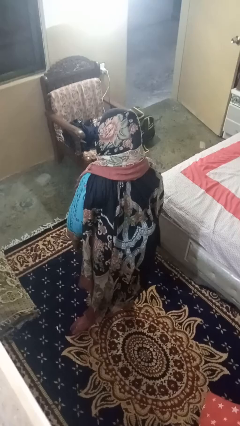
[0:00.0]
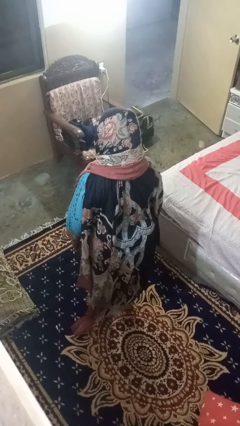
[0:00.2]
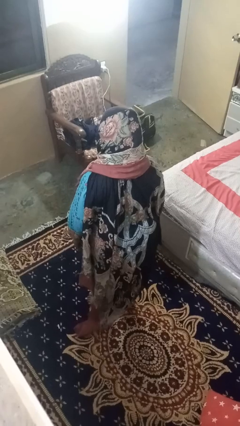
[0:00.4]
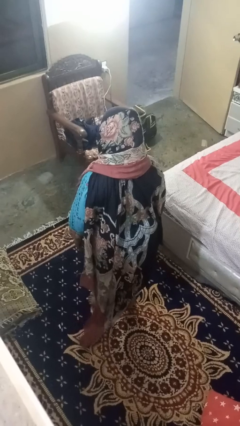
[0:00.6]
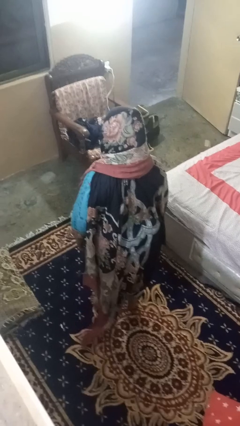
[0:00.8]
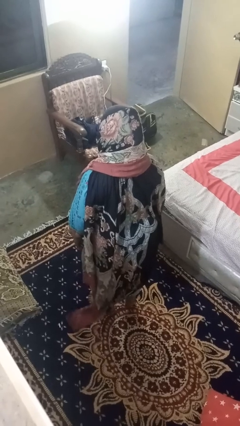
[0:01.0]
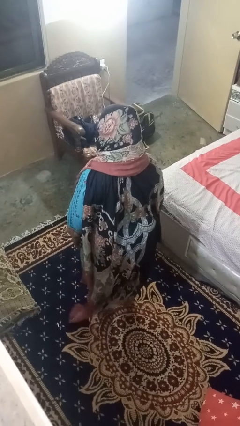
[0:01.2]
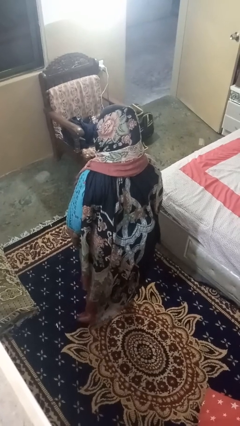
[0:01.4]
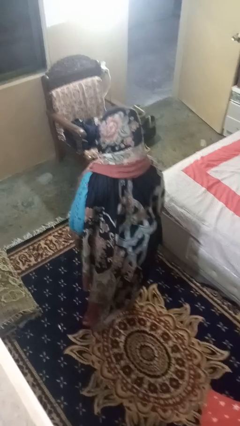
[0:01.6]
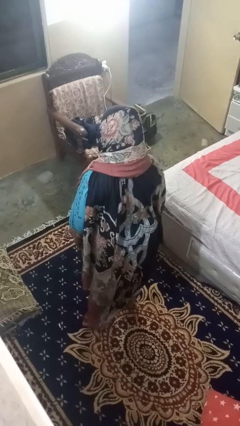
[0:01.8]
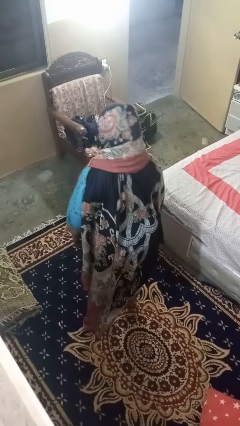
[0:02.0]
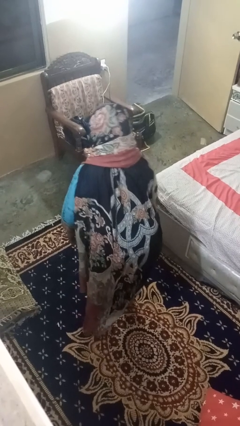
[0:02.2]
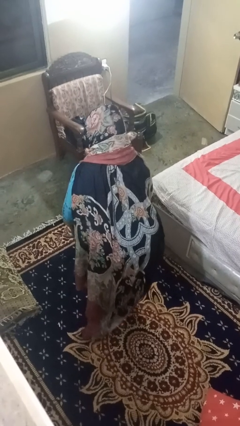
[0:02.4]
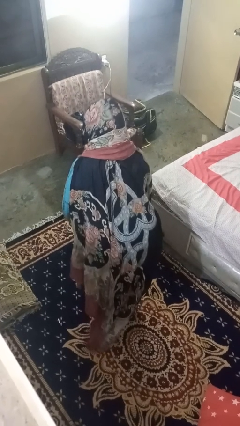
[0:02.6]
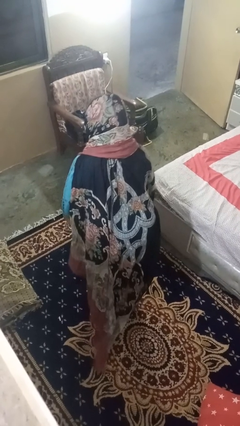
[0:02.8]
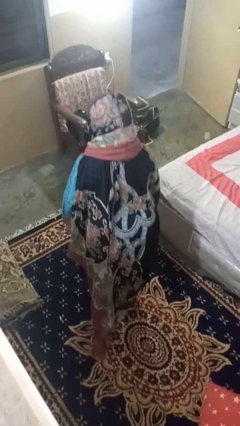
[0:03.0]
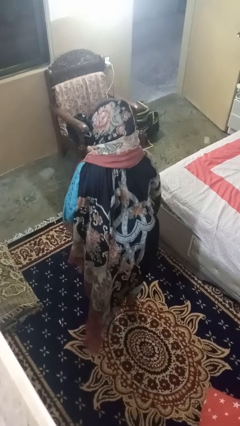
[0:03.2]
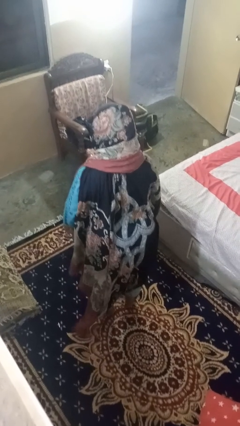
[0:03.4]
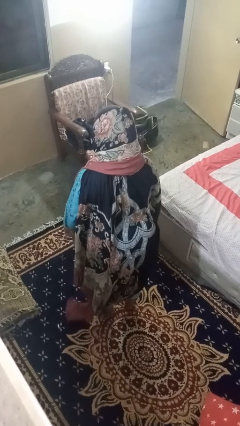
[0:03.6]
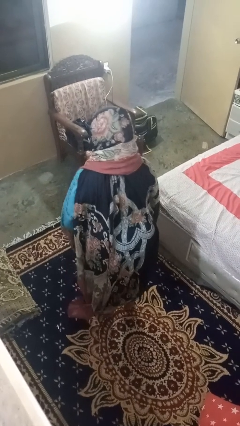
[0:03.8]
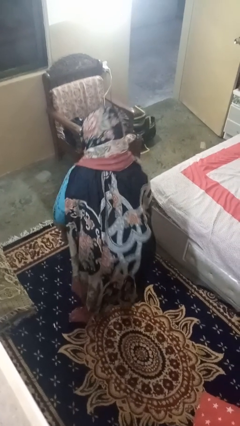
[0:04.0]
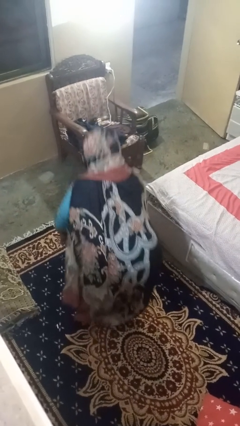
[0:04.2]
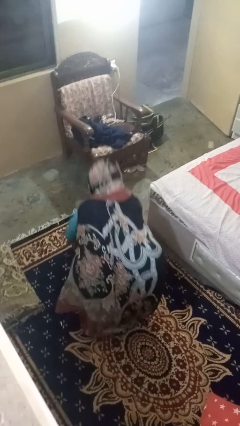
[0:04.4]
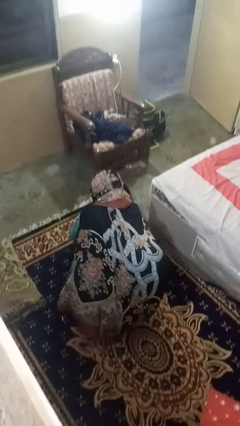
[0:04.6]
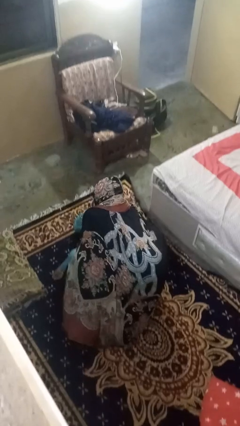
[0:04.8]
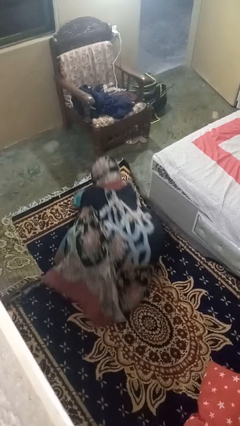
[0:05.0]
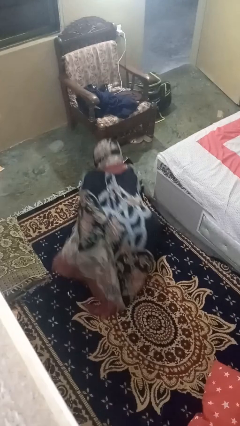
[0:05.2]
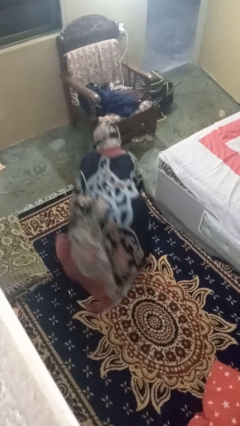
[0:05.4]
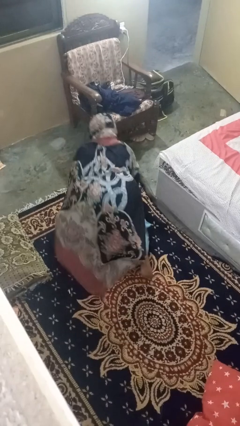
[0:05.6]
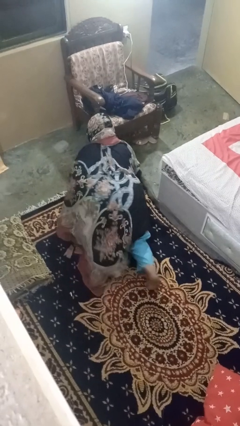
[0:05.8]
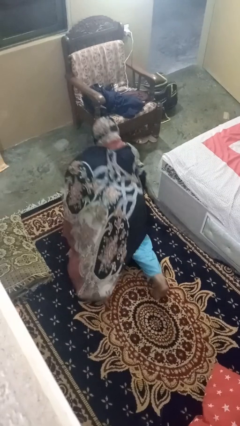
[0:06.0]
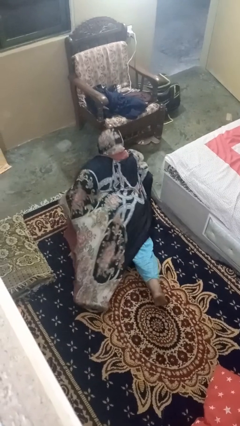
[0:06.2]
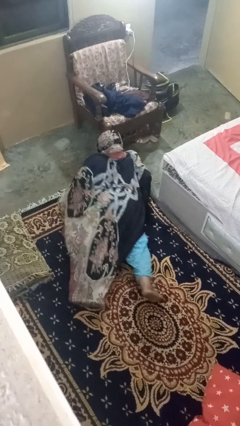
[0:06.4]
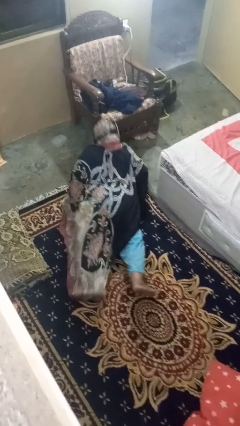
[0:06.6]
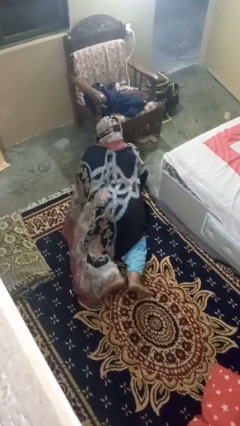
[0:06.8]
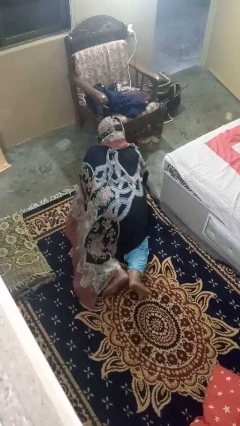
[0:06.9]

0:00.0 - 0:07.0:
person exercises with pushup

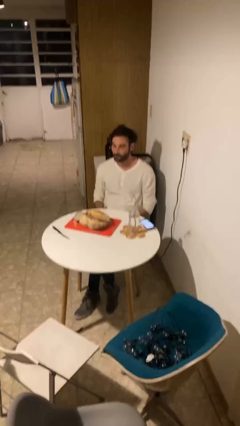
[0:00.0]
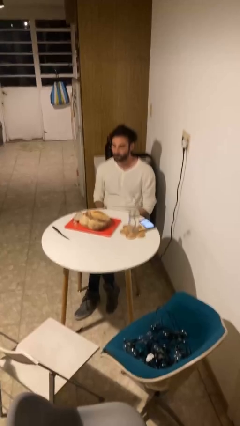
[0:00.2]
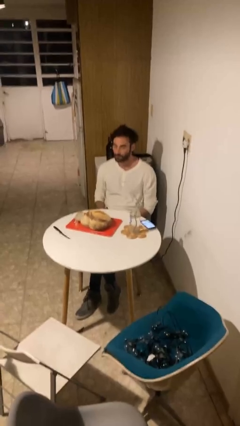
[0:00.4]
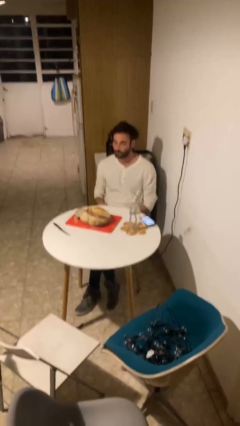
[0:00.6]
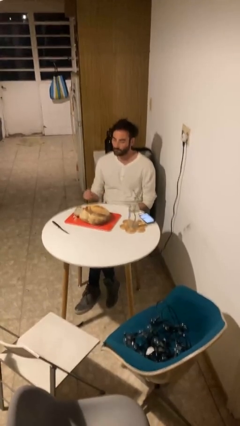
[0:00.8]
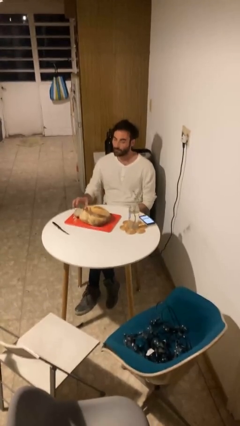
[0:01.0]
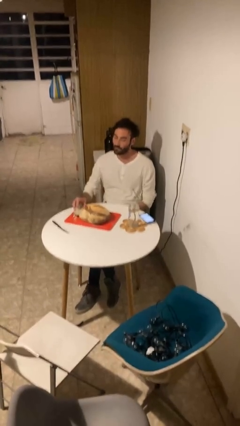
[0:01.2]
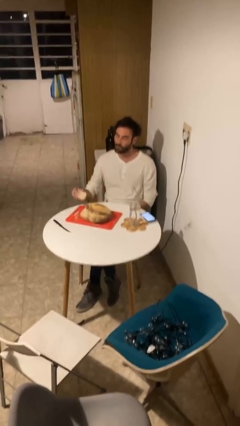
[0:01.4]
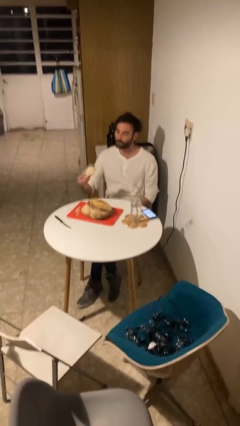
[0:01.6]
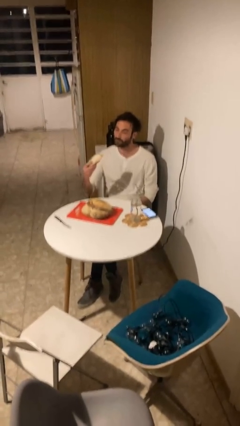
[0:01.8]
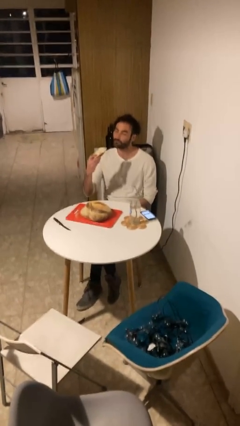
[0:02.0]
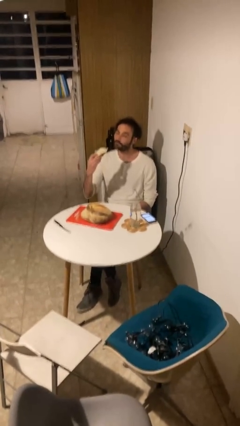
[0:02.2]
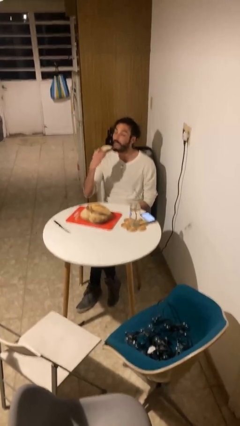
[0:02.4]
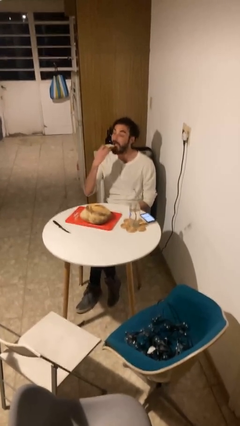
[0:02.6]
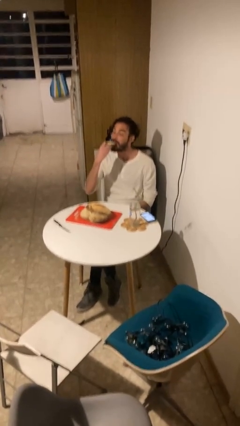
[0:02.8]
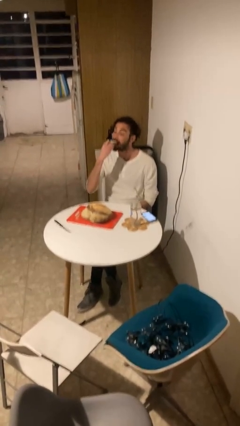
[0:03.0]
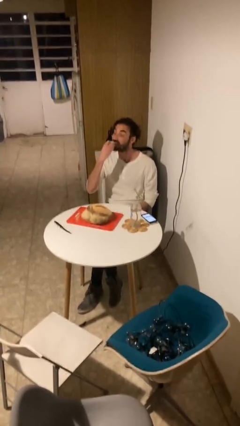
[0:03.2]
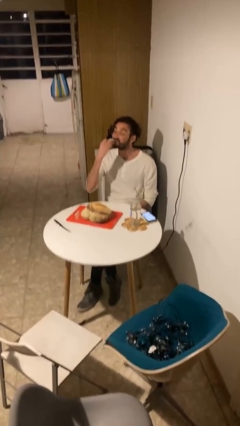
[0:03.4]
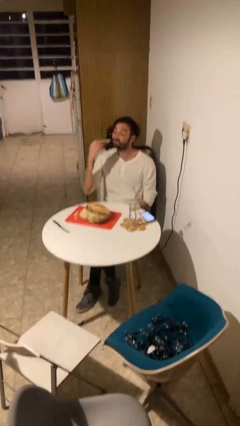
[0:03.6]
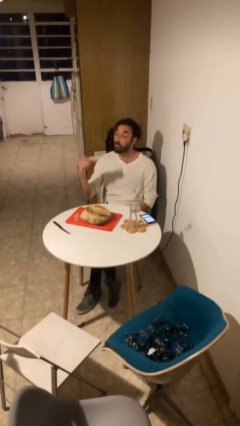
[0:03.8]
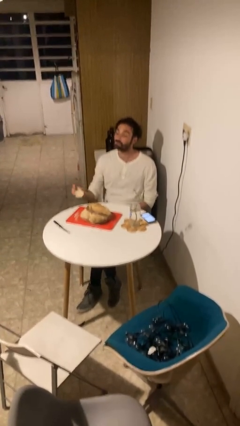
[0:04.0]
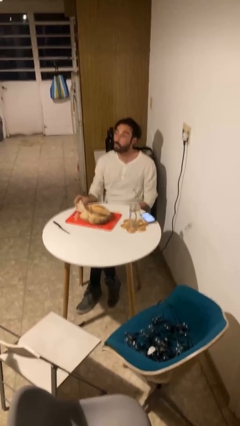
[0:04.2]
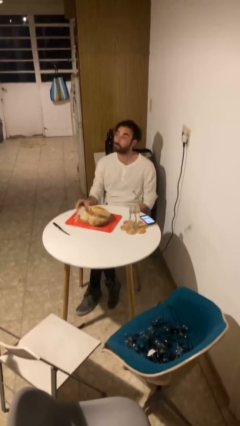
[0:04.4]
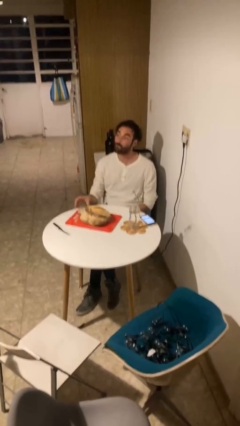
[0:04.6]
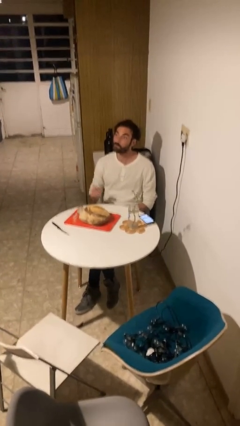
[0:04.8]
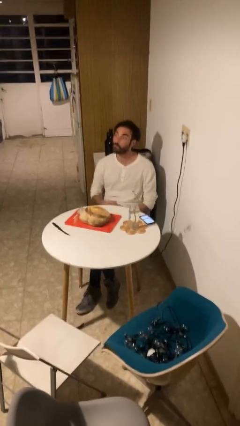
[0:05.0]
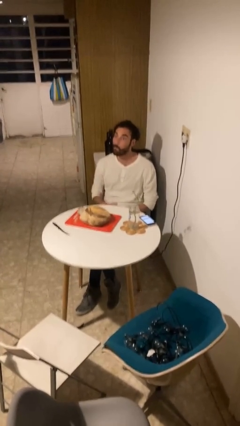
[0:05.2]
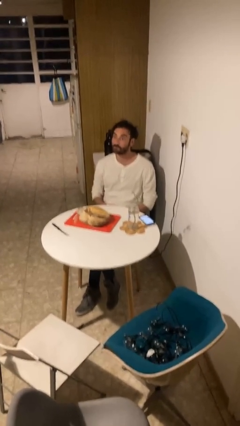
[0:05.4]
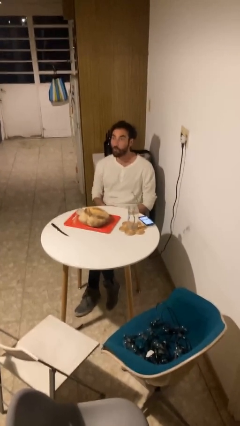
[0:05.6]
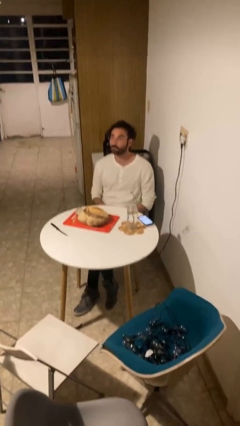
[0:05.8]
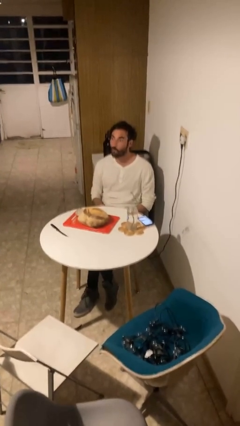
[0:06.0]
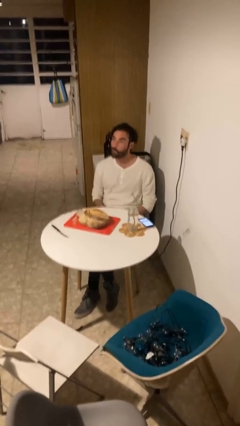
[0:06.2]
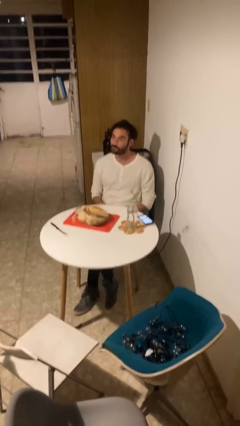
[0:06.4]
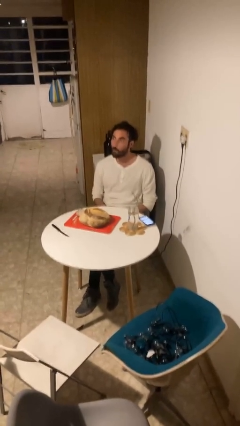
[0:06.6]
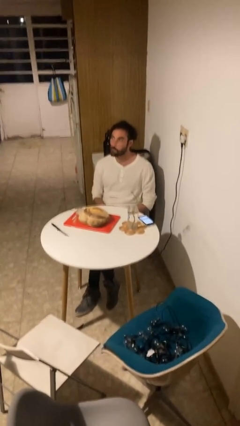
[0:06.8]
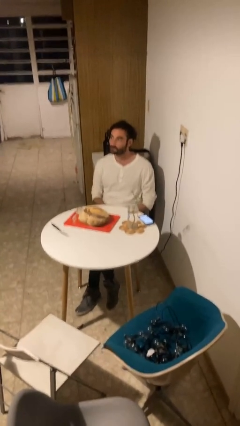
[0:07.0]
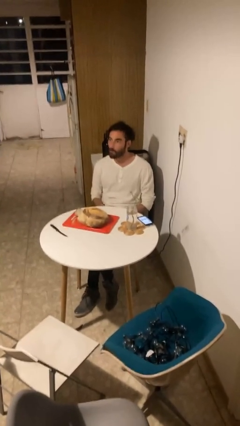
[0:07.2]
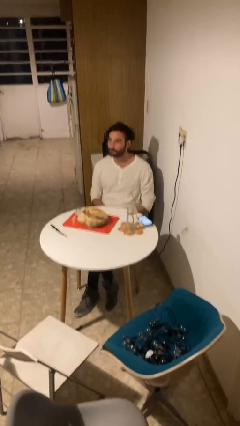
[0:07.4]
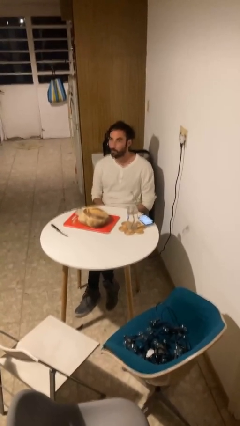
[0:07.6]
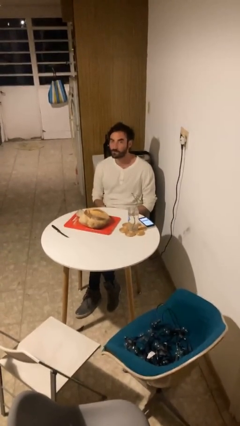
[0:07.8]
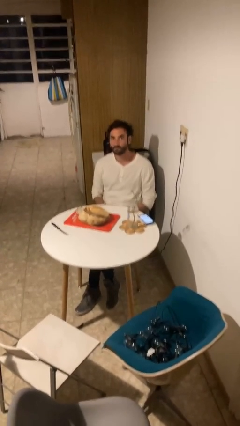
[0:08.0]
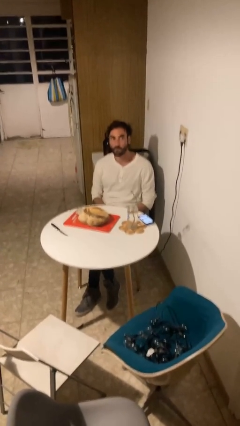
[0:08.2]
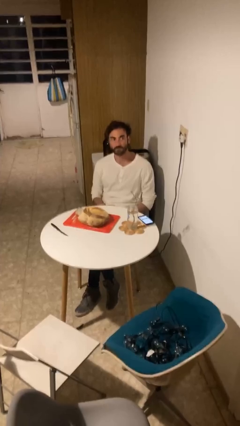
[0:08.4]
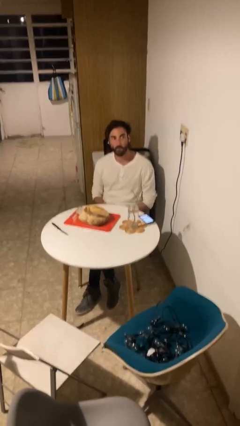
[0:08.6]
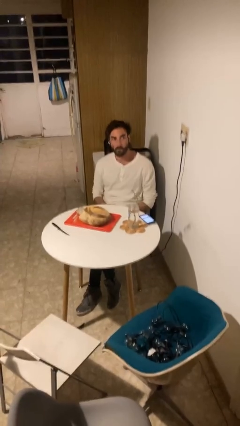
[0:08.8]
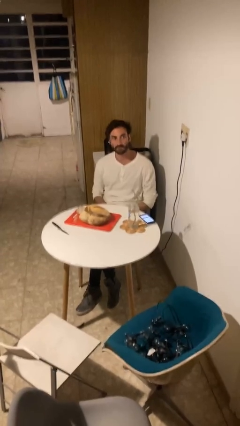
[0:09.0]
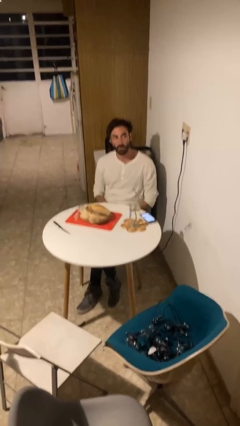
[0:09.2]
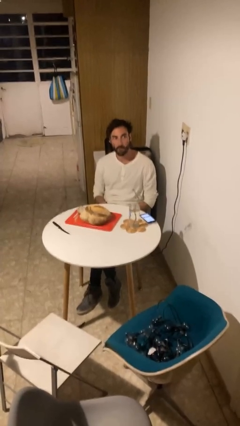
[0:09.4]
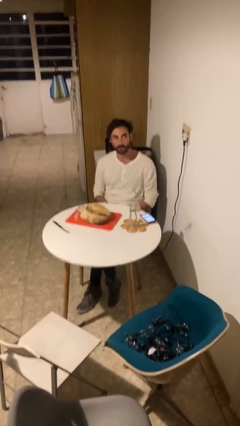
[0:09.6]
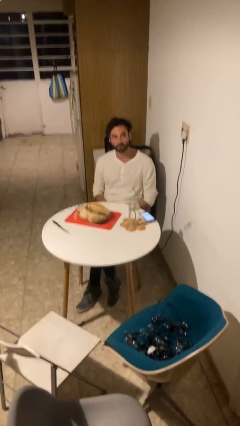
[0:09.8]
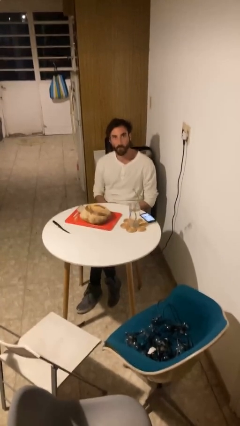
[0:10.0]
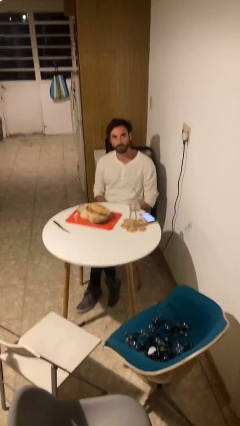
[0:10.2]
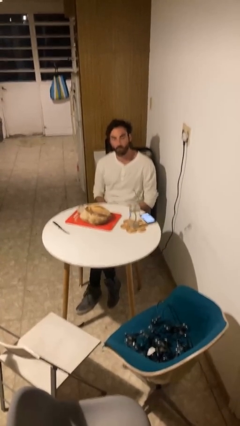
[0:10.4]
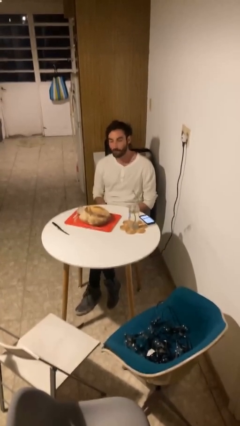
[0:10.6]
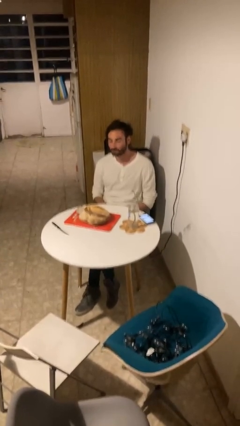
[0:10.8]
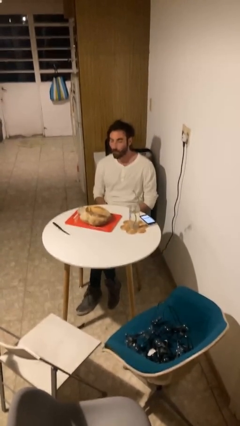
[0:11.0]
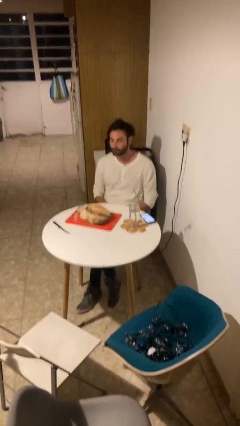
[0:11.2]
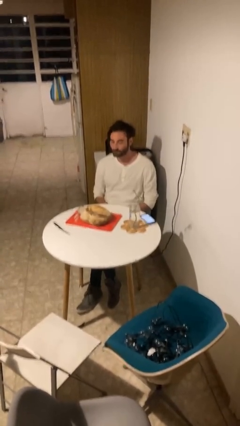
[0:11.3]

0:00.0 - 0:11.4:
person eats with hands
